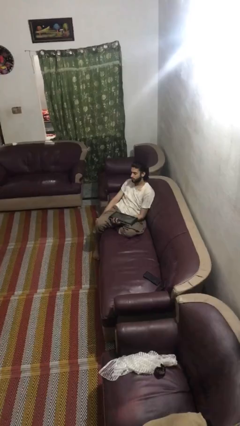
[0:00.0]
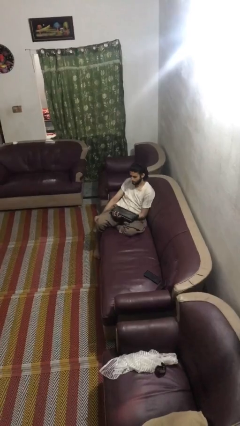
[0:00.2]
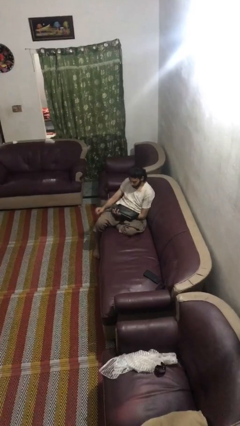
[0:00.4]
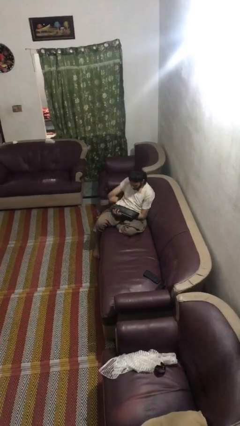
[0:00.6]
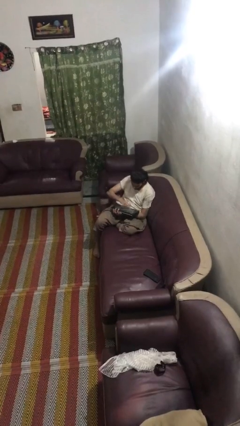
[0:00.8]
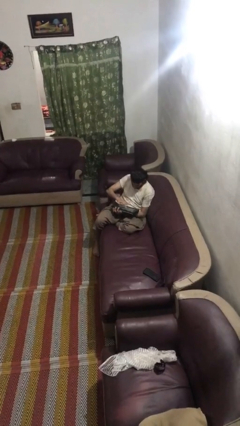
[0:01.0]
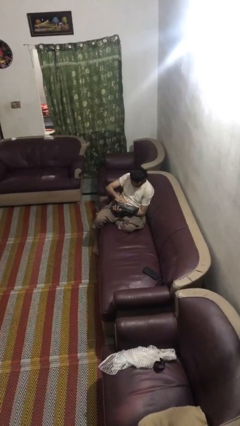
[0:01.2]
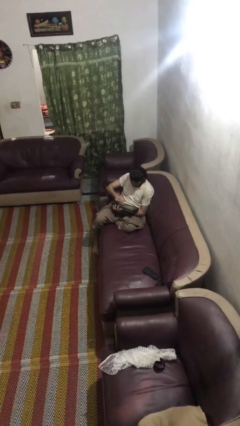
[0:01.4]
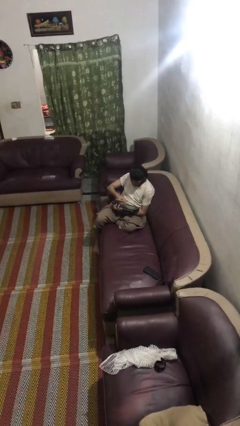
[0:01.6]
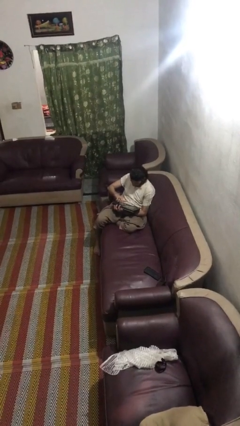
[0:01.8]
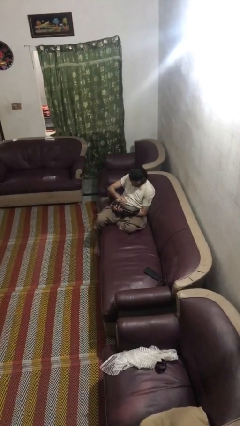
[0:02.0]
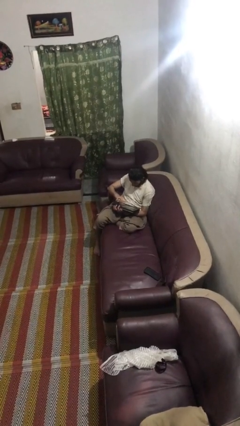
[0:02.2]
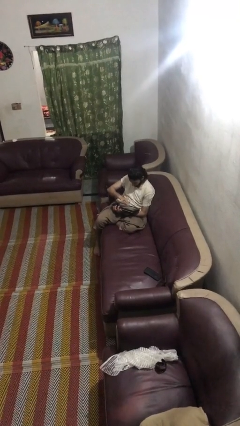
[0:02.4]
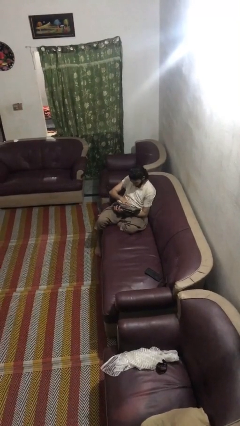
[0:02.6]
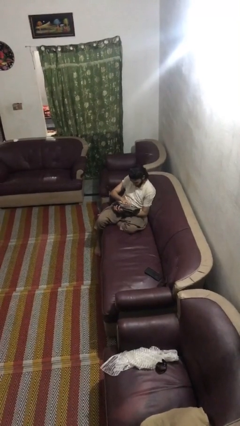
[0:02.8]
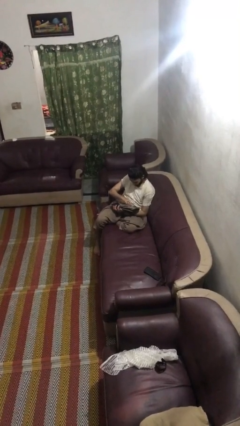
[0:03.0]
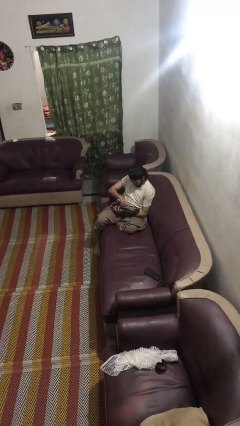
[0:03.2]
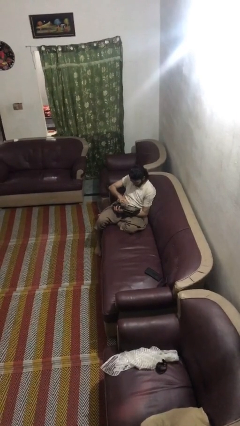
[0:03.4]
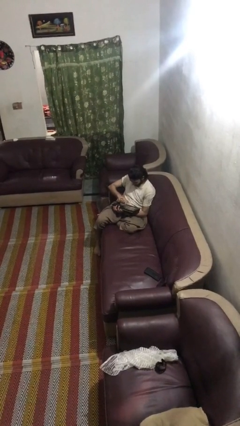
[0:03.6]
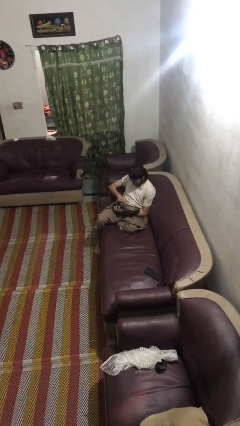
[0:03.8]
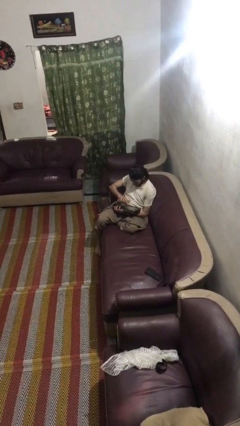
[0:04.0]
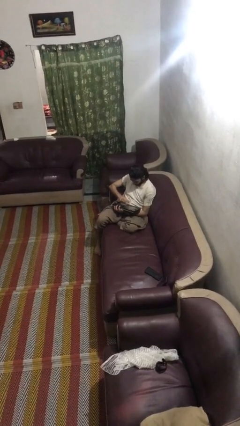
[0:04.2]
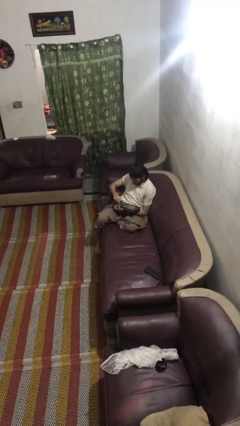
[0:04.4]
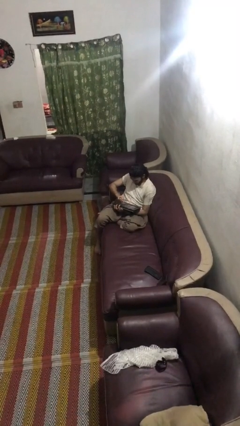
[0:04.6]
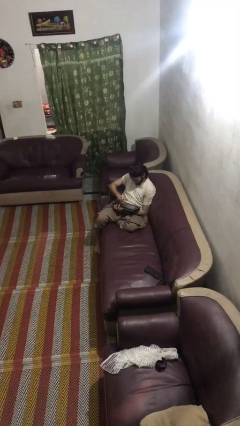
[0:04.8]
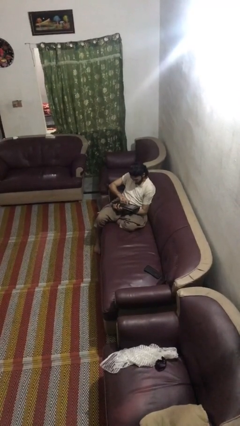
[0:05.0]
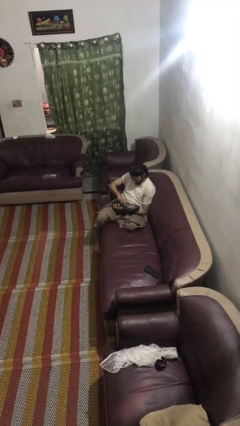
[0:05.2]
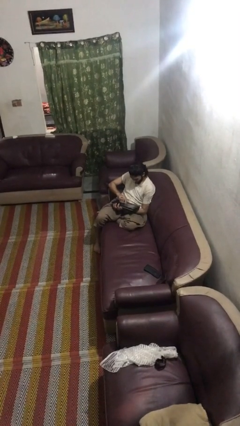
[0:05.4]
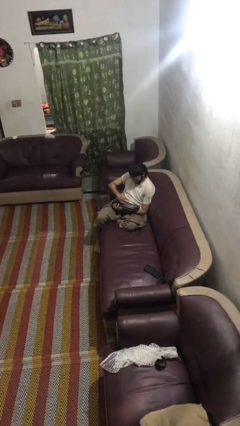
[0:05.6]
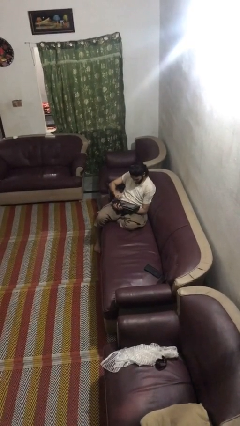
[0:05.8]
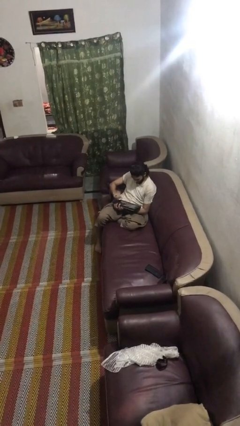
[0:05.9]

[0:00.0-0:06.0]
person interacts with tablet

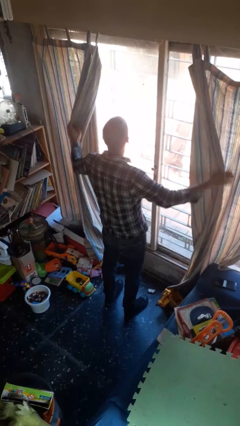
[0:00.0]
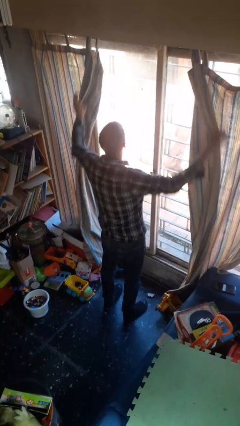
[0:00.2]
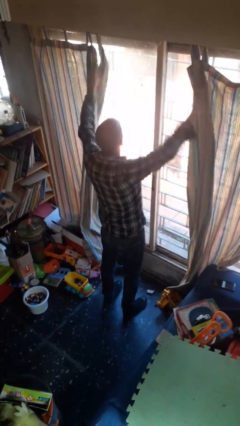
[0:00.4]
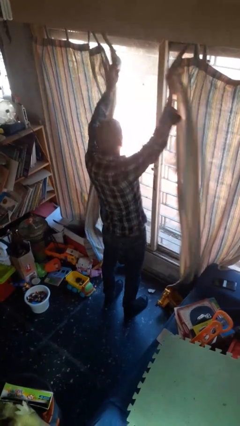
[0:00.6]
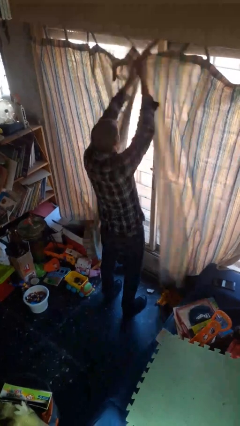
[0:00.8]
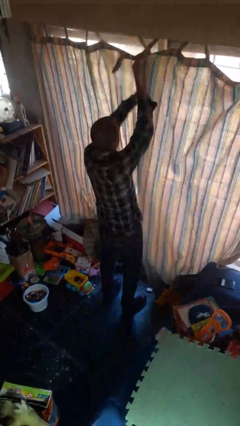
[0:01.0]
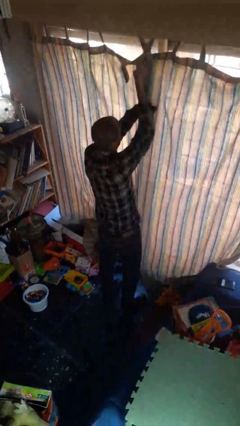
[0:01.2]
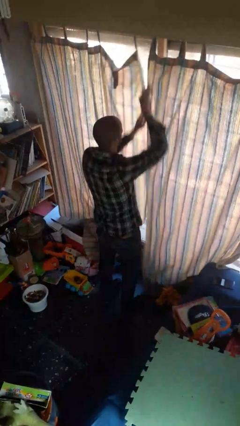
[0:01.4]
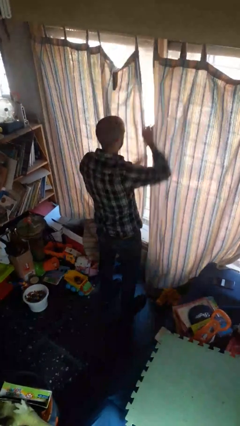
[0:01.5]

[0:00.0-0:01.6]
person closes curtains

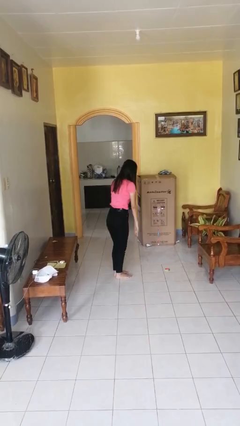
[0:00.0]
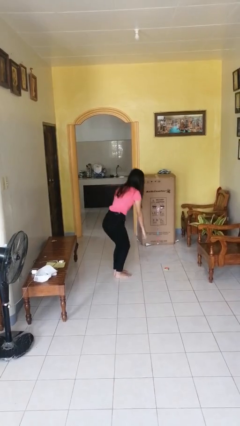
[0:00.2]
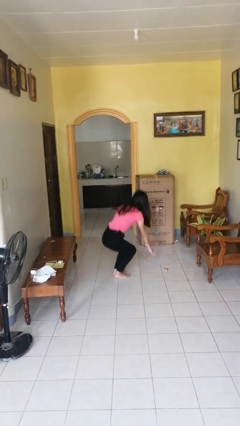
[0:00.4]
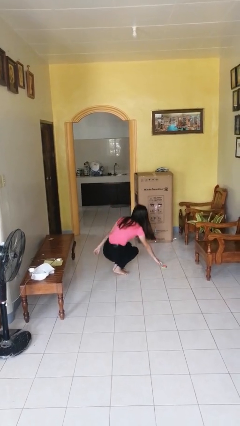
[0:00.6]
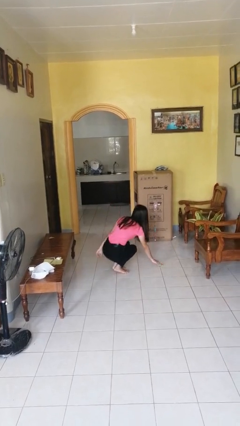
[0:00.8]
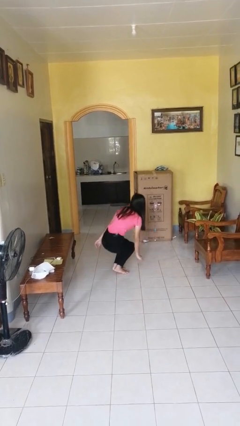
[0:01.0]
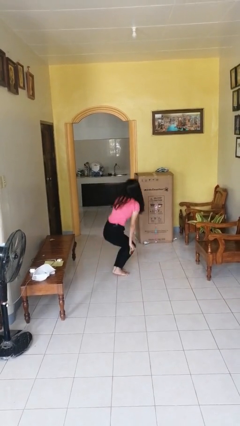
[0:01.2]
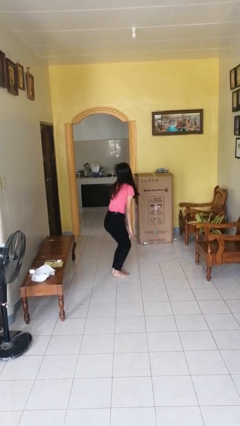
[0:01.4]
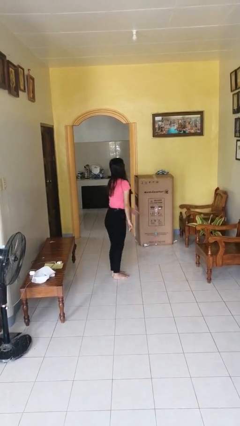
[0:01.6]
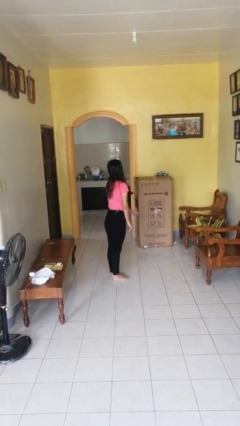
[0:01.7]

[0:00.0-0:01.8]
person picks up object from floor

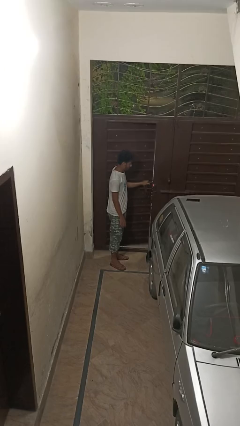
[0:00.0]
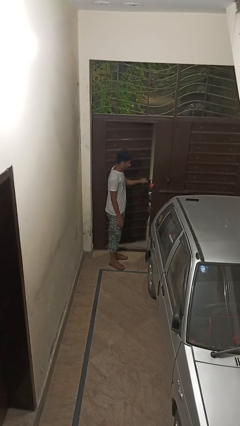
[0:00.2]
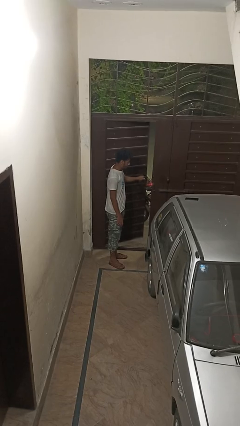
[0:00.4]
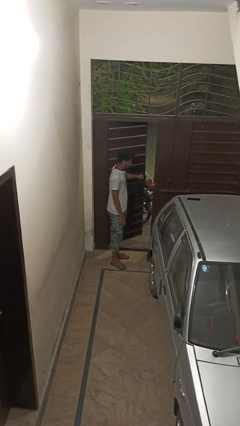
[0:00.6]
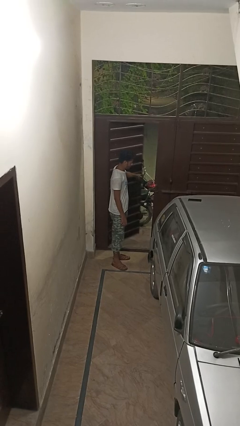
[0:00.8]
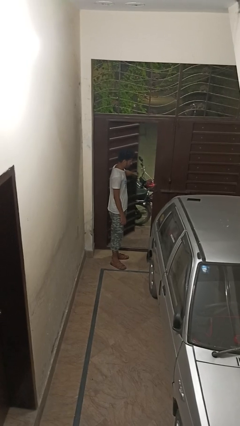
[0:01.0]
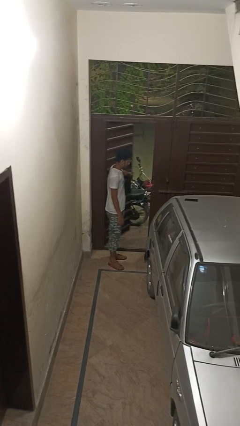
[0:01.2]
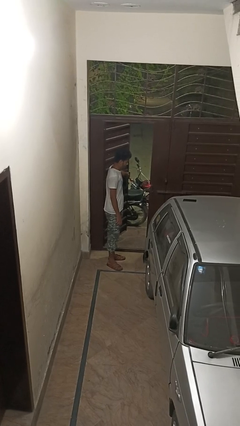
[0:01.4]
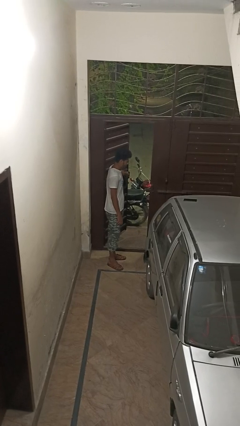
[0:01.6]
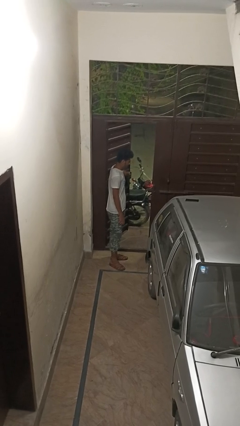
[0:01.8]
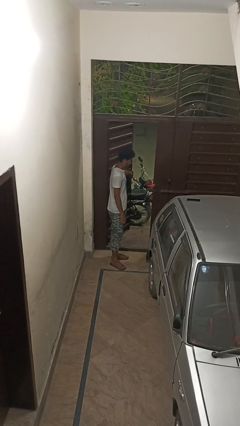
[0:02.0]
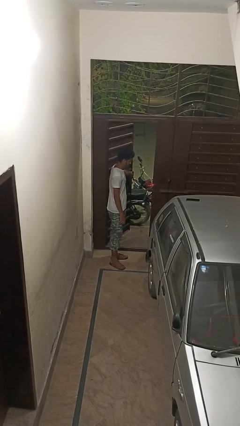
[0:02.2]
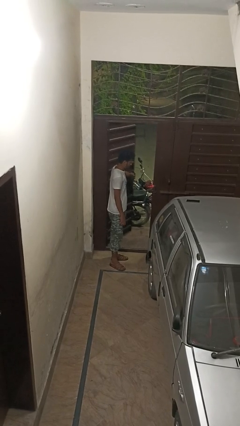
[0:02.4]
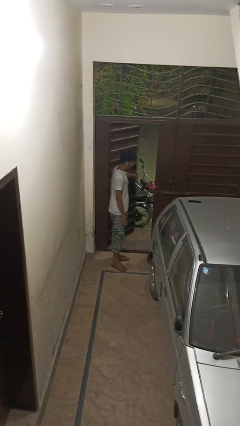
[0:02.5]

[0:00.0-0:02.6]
person opens gate

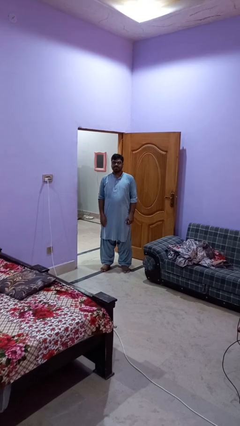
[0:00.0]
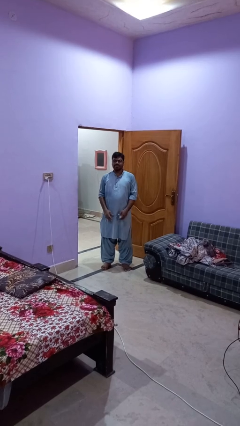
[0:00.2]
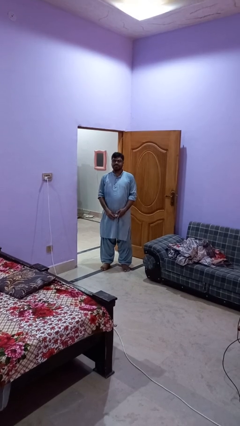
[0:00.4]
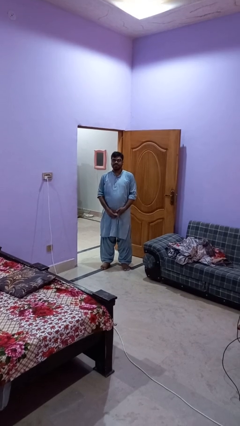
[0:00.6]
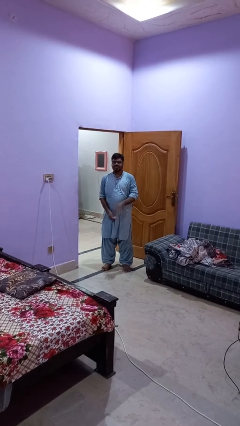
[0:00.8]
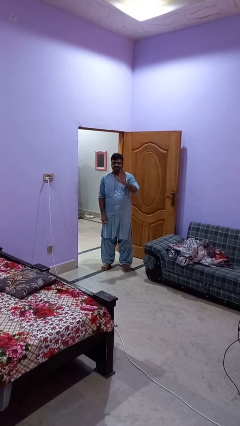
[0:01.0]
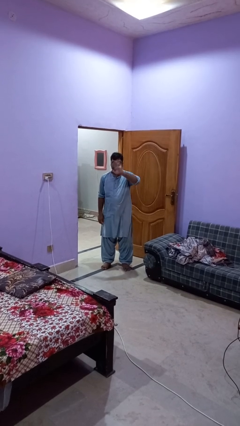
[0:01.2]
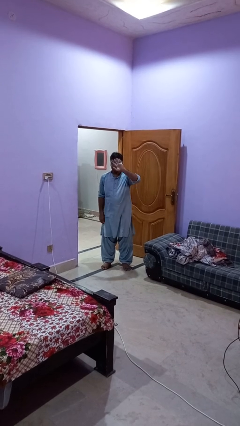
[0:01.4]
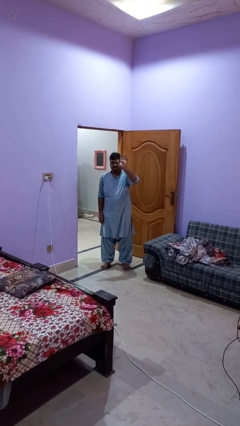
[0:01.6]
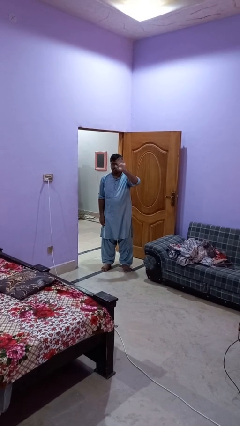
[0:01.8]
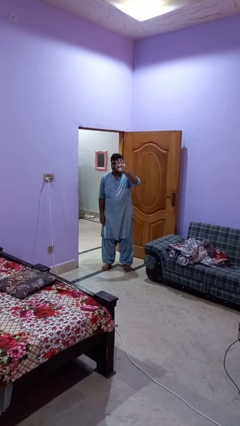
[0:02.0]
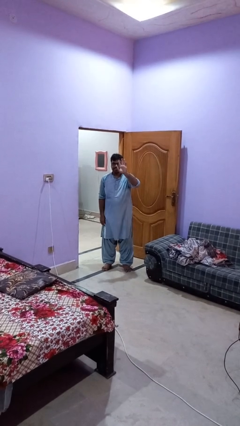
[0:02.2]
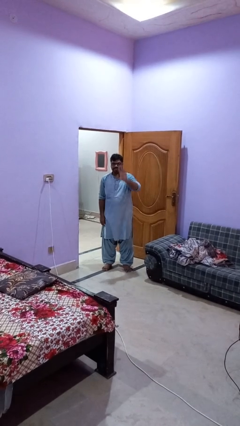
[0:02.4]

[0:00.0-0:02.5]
person waves at person

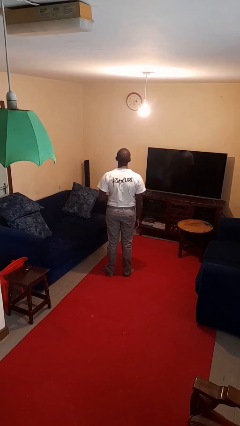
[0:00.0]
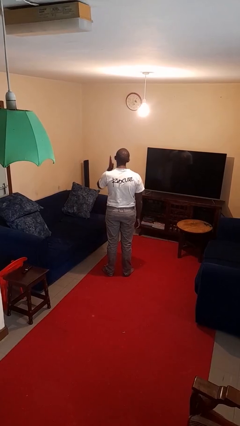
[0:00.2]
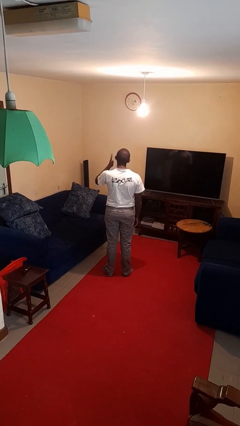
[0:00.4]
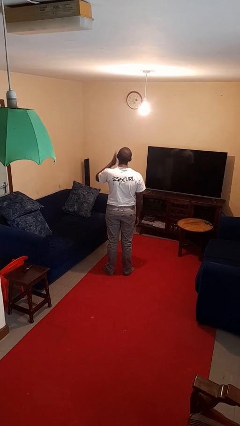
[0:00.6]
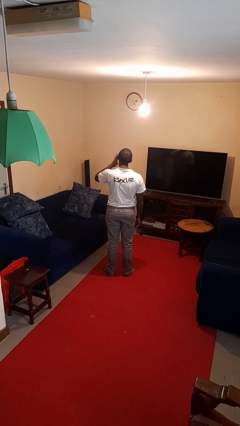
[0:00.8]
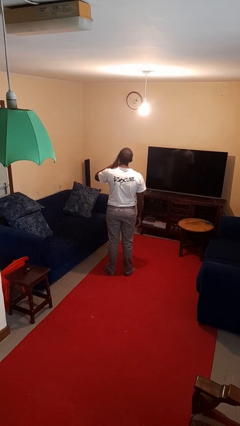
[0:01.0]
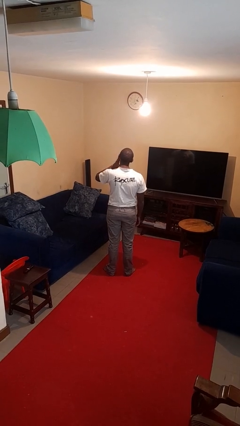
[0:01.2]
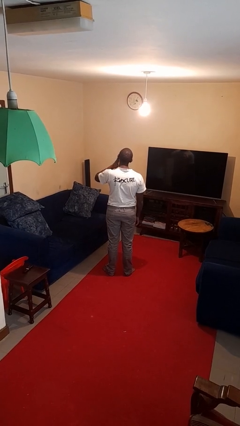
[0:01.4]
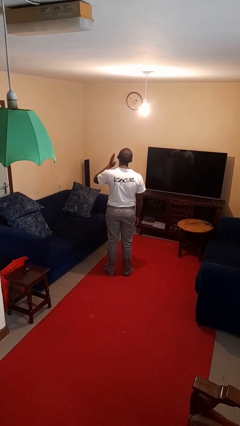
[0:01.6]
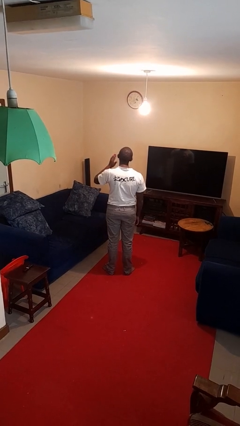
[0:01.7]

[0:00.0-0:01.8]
person swats bug

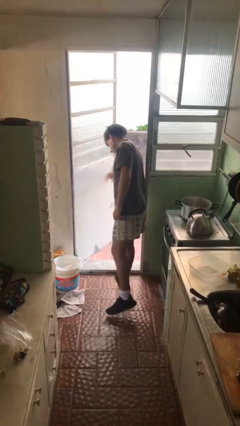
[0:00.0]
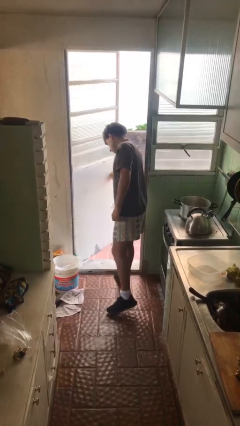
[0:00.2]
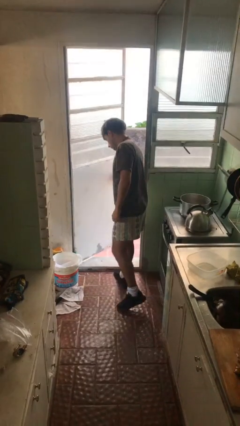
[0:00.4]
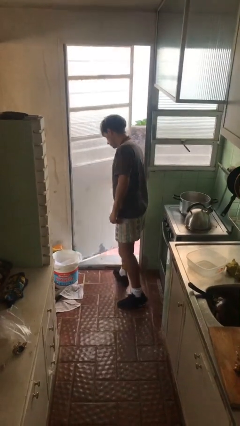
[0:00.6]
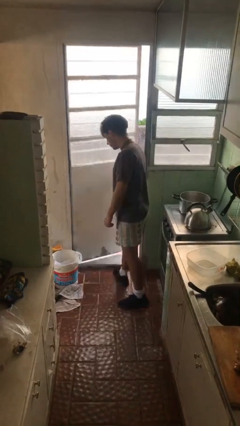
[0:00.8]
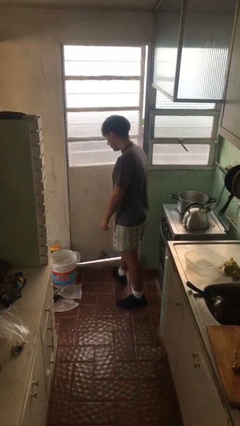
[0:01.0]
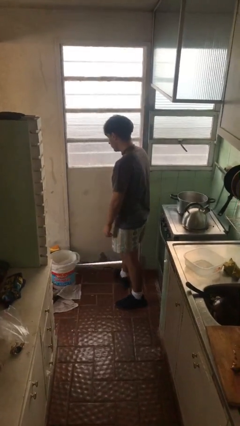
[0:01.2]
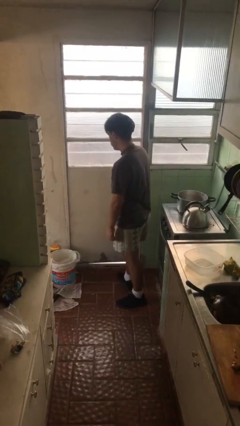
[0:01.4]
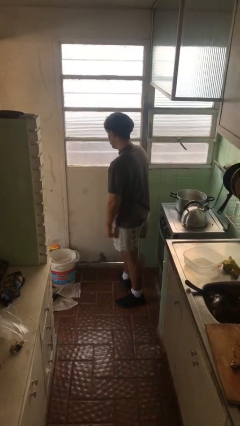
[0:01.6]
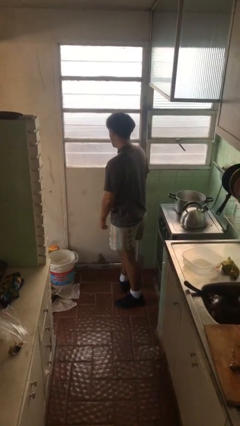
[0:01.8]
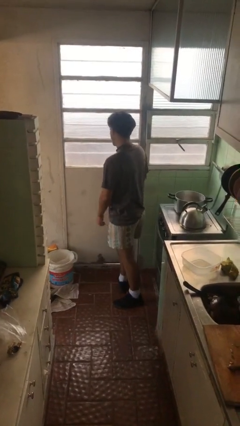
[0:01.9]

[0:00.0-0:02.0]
person closes facility door
